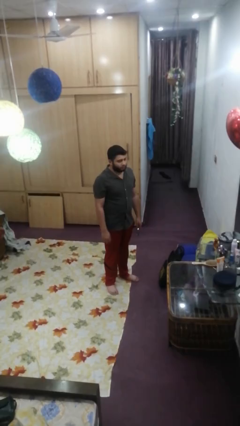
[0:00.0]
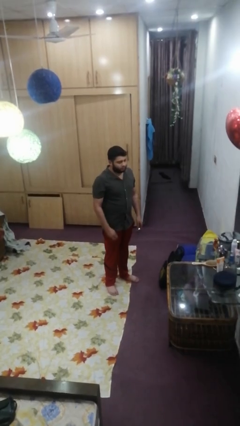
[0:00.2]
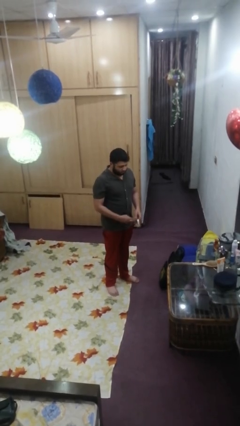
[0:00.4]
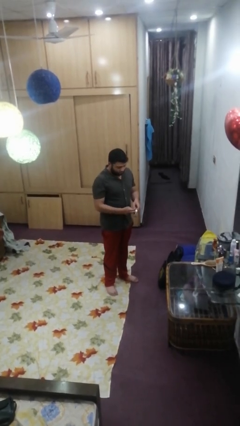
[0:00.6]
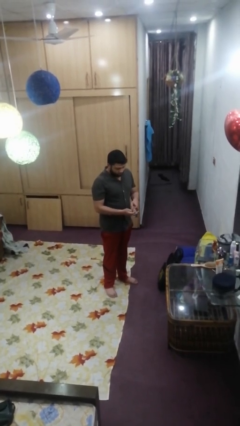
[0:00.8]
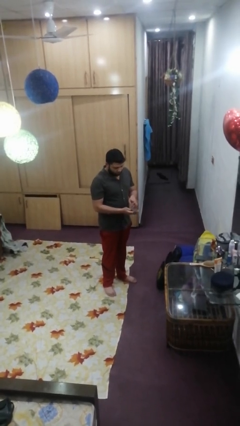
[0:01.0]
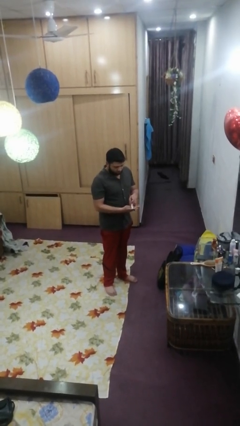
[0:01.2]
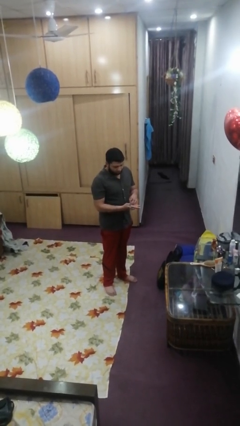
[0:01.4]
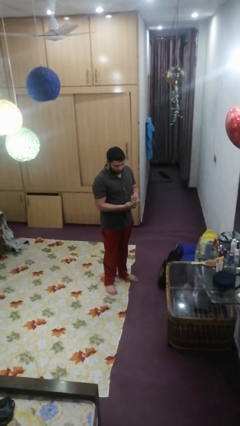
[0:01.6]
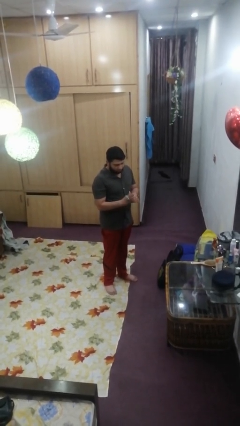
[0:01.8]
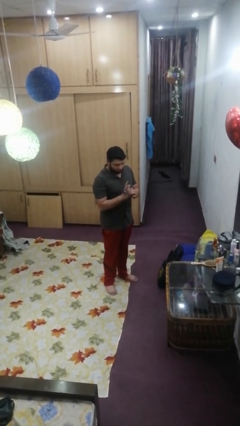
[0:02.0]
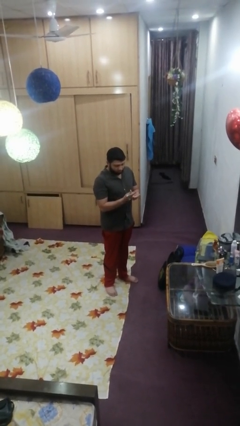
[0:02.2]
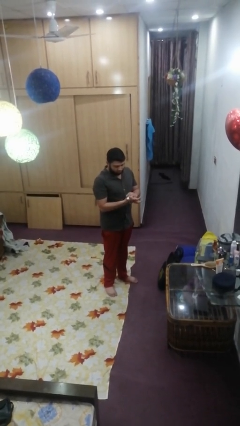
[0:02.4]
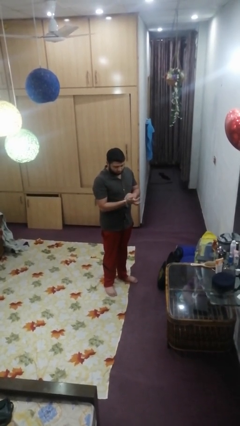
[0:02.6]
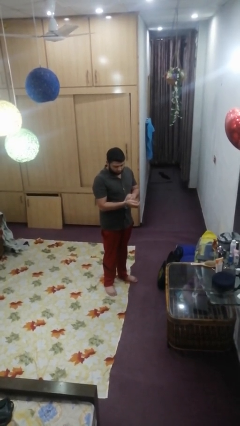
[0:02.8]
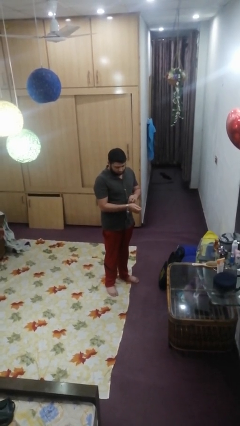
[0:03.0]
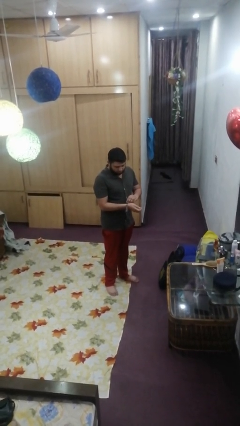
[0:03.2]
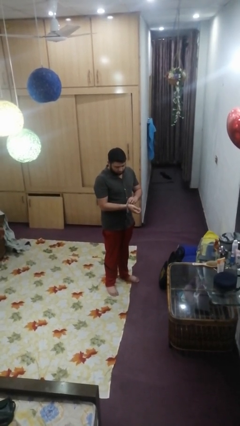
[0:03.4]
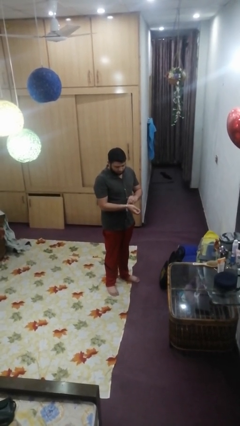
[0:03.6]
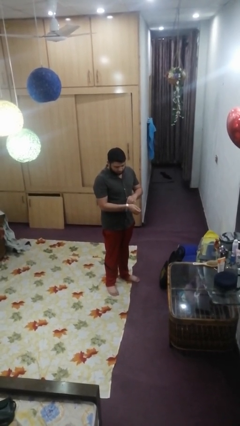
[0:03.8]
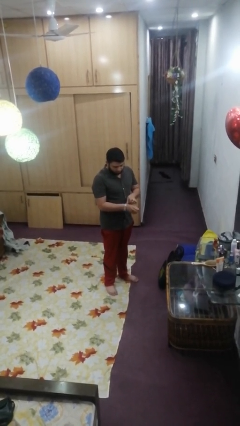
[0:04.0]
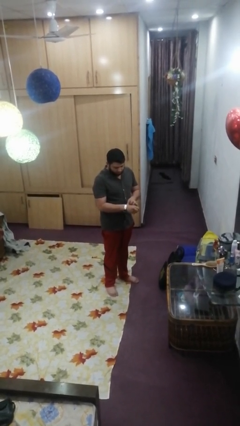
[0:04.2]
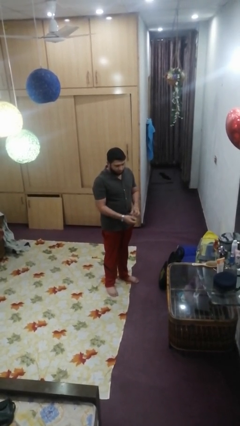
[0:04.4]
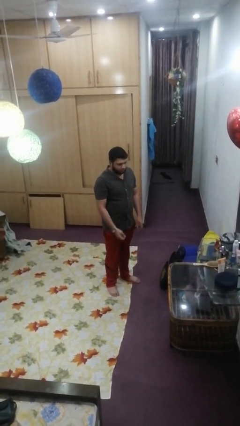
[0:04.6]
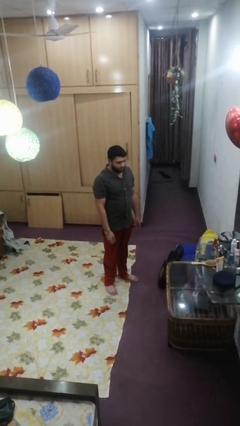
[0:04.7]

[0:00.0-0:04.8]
person puts on wristwatch

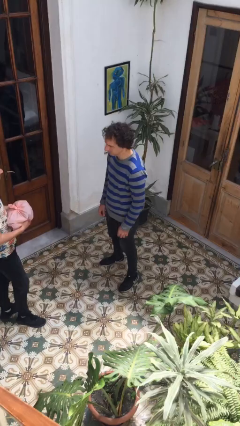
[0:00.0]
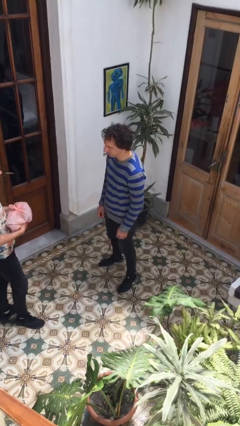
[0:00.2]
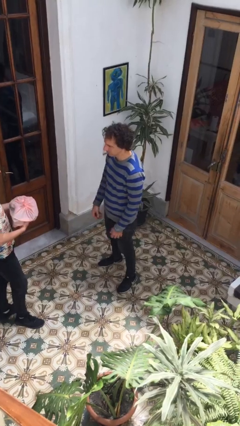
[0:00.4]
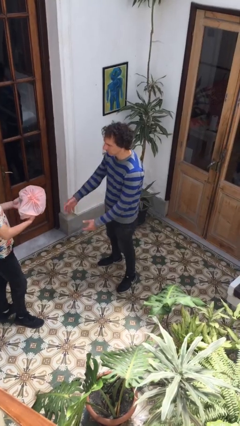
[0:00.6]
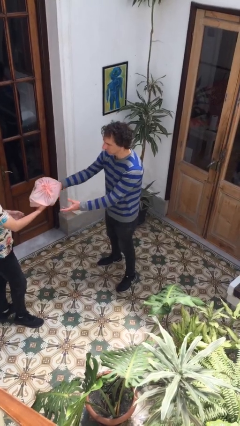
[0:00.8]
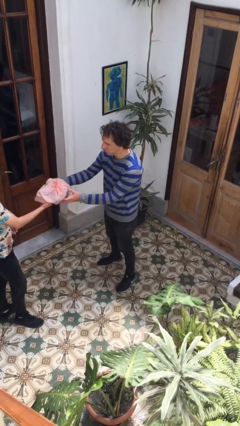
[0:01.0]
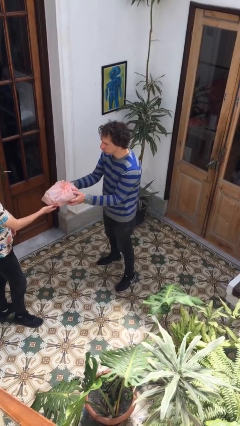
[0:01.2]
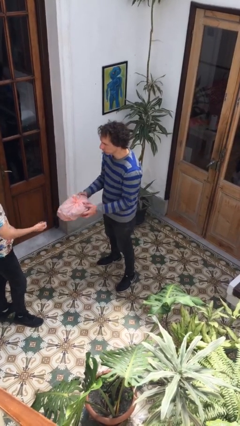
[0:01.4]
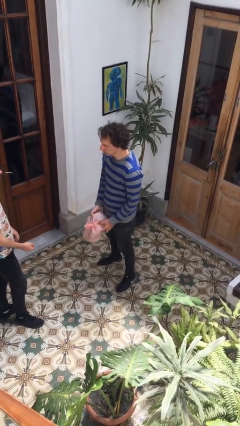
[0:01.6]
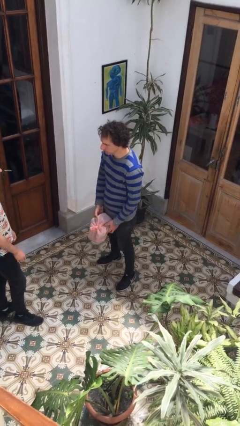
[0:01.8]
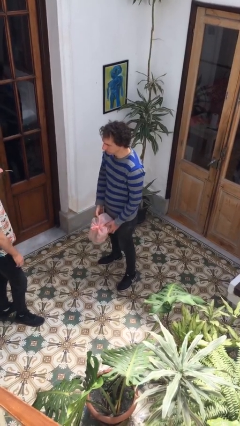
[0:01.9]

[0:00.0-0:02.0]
person transfers object to person

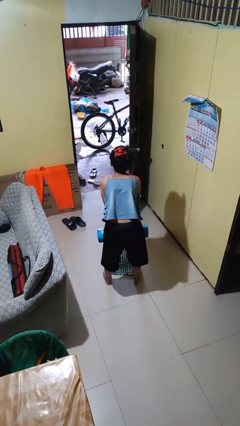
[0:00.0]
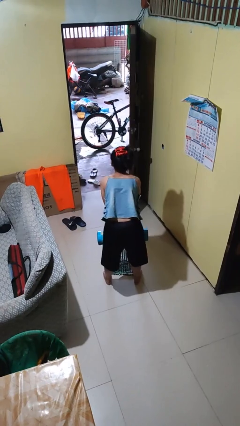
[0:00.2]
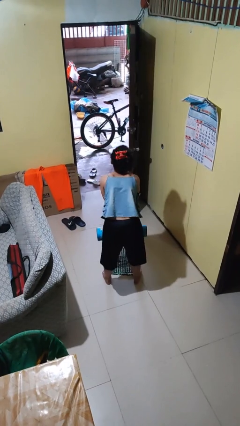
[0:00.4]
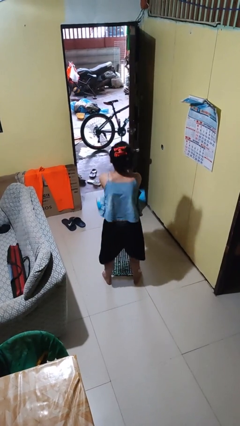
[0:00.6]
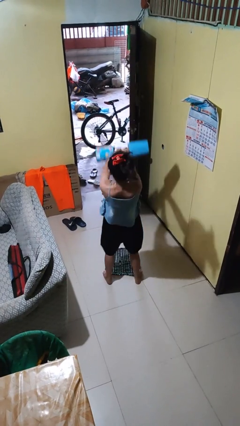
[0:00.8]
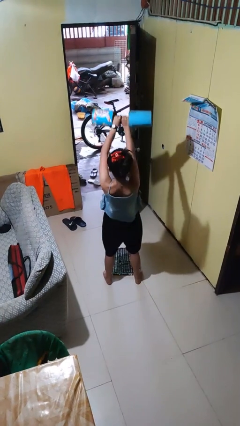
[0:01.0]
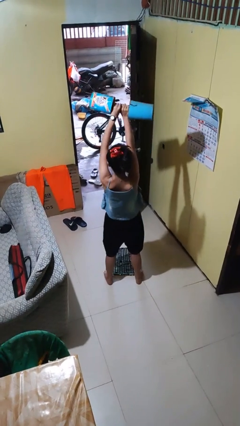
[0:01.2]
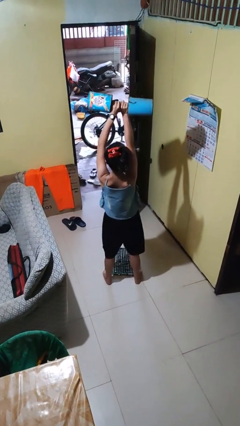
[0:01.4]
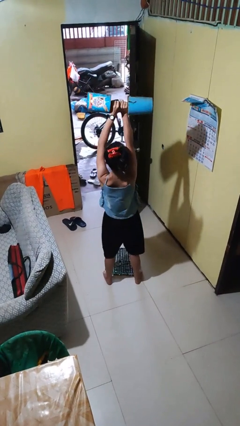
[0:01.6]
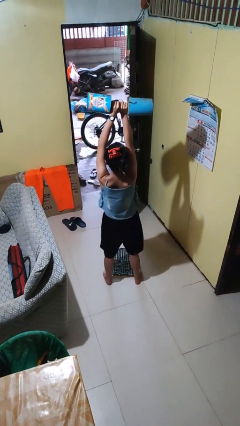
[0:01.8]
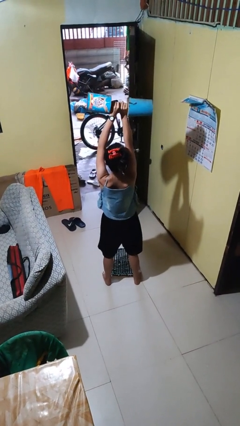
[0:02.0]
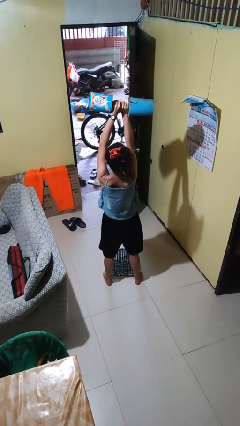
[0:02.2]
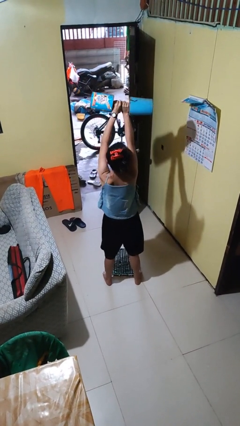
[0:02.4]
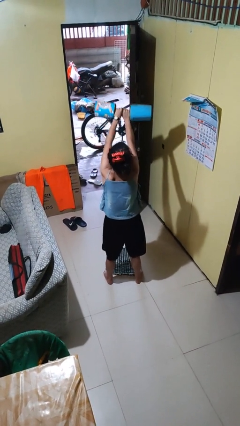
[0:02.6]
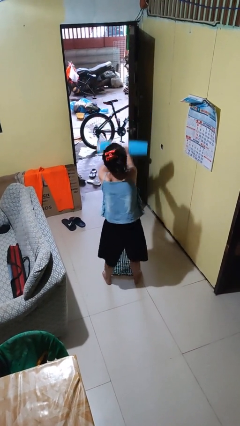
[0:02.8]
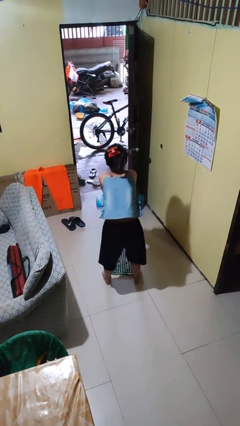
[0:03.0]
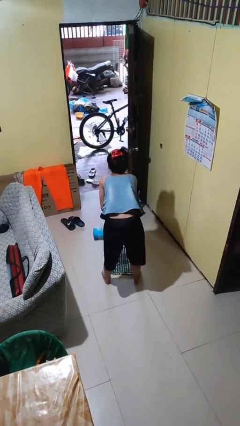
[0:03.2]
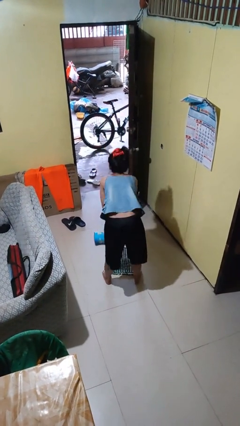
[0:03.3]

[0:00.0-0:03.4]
person lifts dumbbells

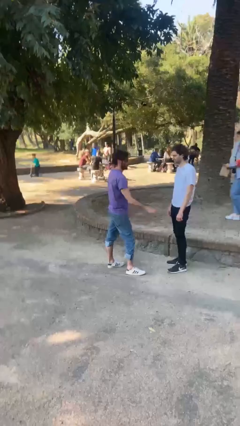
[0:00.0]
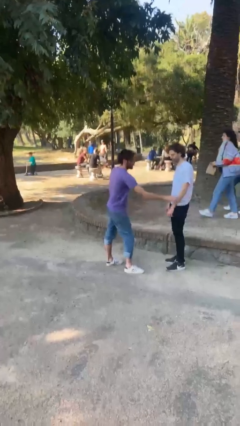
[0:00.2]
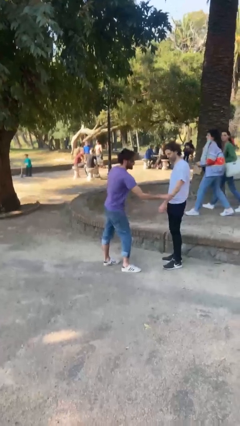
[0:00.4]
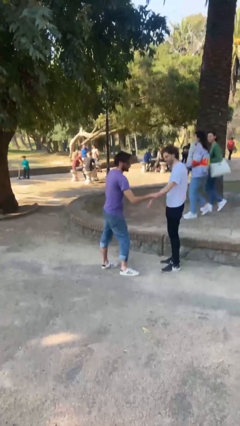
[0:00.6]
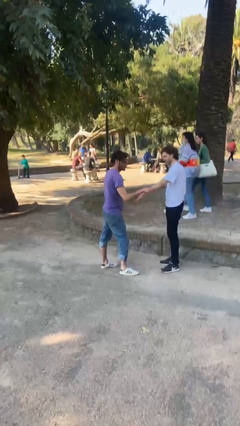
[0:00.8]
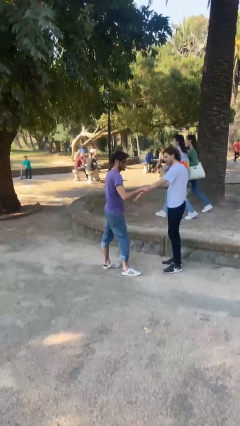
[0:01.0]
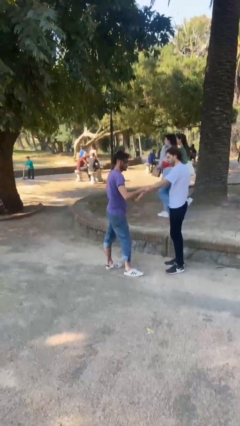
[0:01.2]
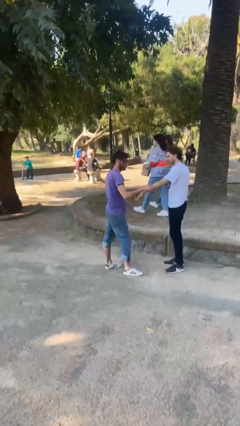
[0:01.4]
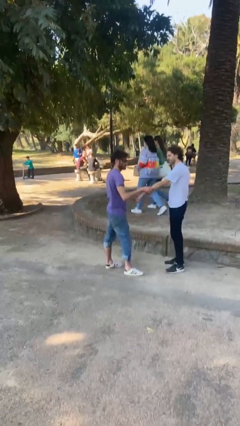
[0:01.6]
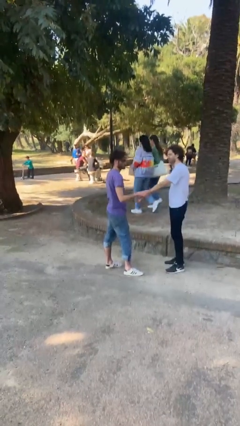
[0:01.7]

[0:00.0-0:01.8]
person grabs person by forearm

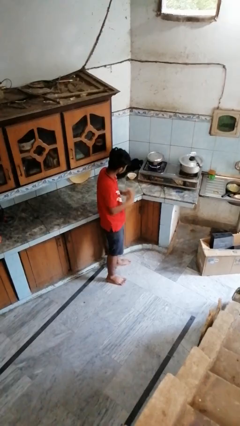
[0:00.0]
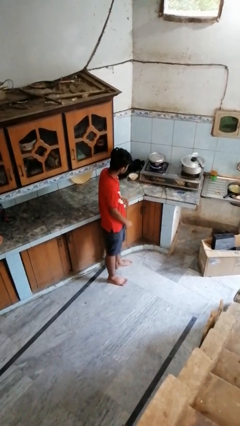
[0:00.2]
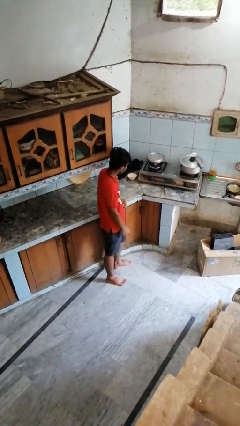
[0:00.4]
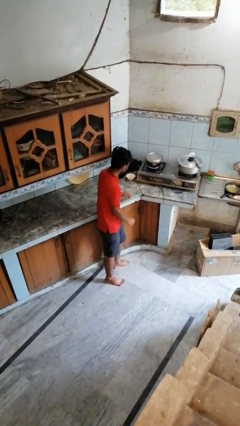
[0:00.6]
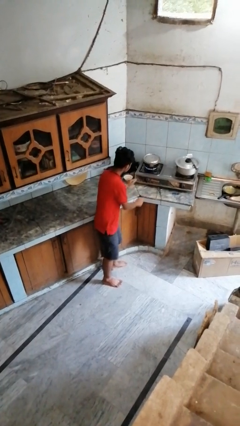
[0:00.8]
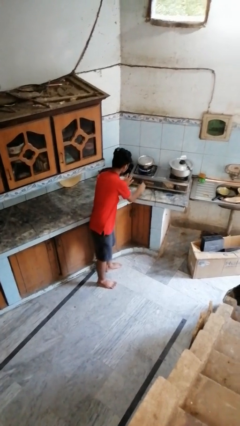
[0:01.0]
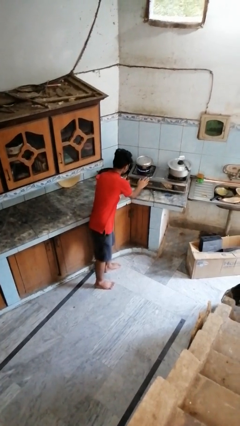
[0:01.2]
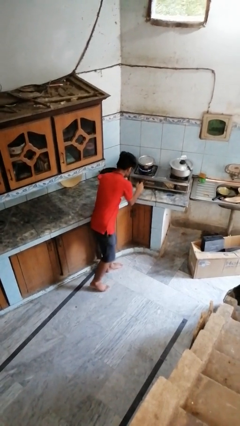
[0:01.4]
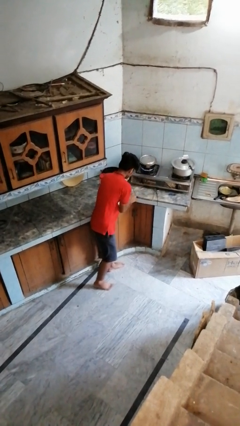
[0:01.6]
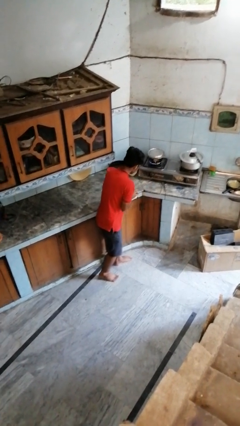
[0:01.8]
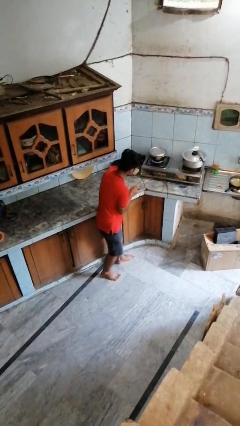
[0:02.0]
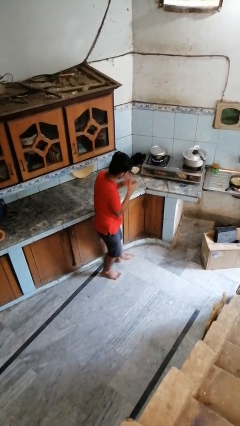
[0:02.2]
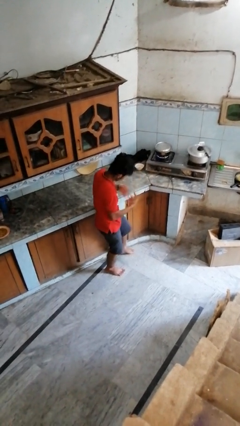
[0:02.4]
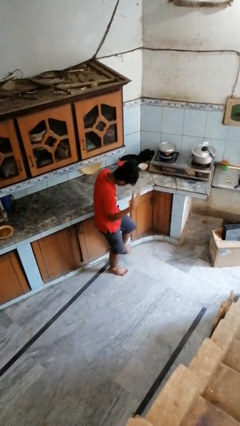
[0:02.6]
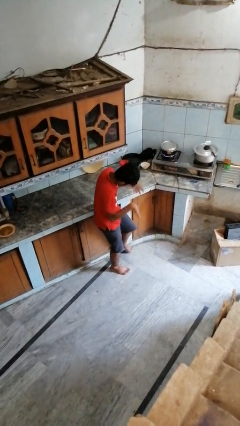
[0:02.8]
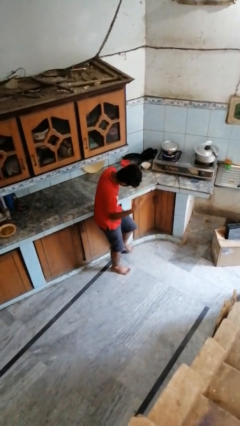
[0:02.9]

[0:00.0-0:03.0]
person burns hand

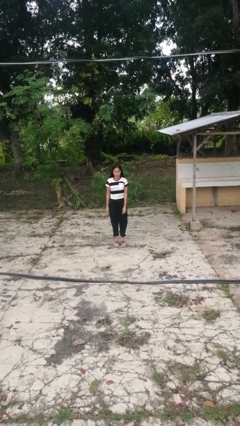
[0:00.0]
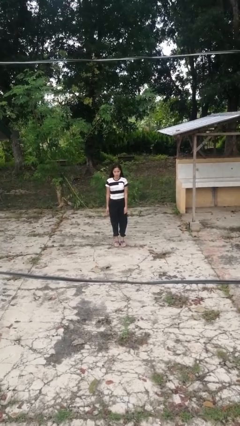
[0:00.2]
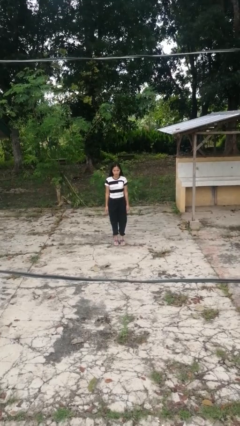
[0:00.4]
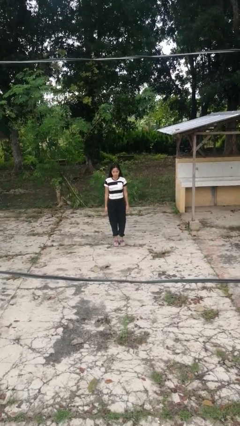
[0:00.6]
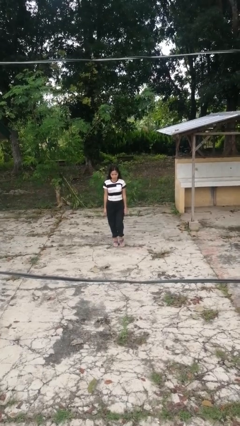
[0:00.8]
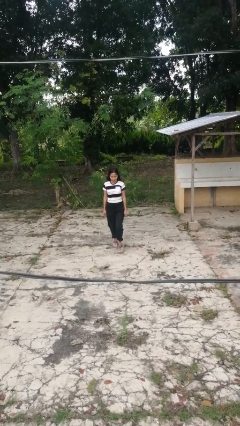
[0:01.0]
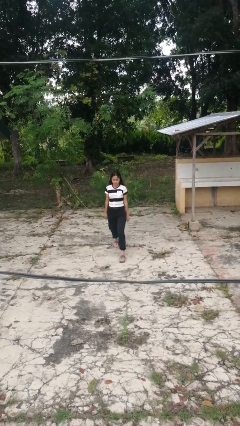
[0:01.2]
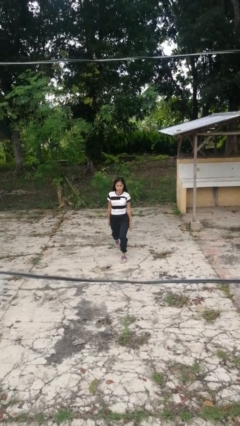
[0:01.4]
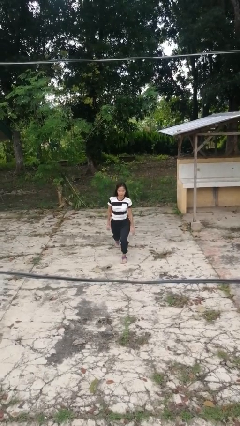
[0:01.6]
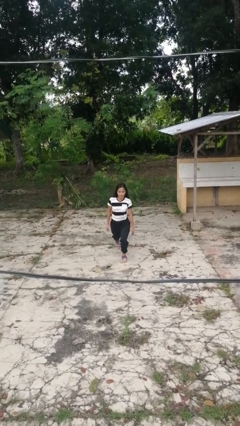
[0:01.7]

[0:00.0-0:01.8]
person exercises with lunges
